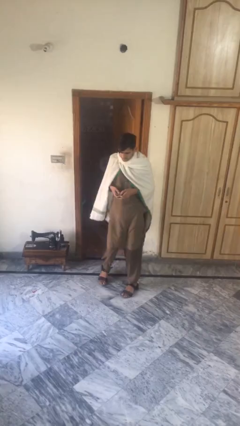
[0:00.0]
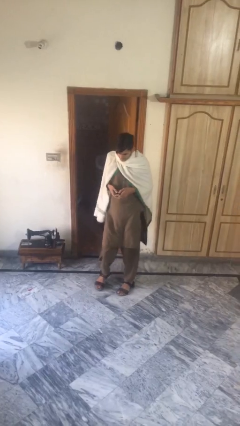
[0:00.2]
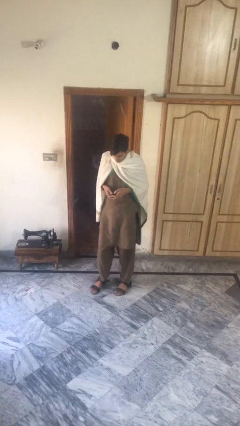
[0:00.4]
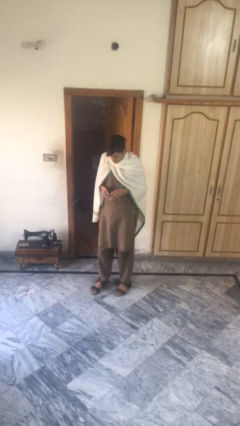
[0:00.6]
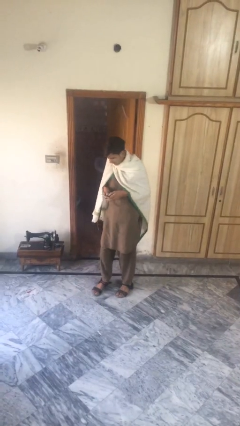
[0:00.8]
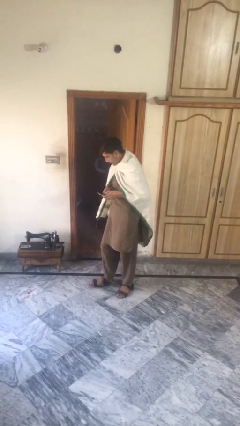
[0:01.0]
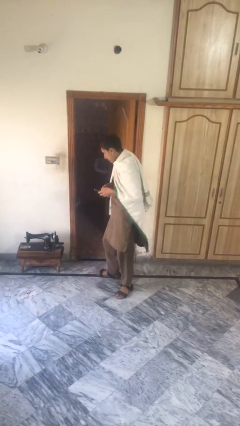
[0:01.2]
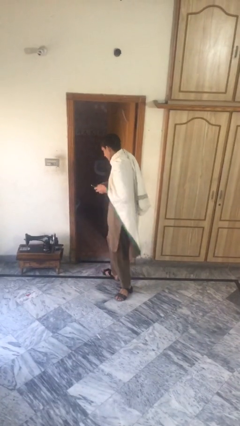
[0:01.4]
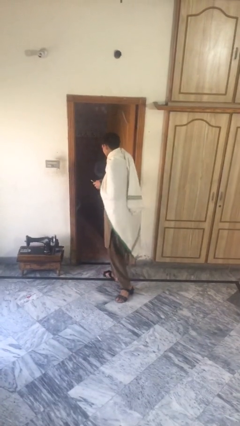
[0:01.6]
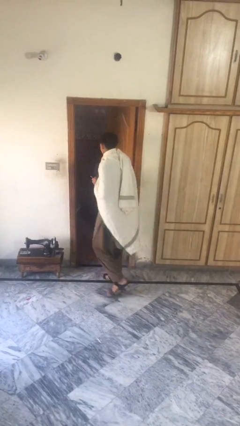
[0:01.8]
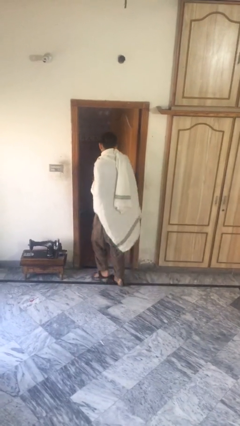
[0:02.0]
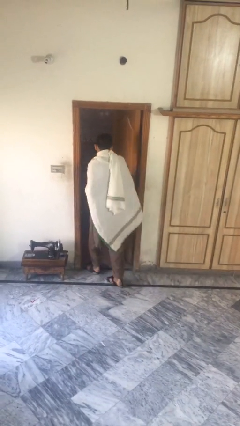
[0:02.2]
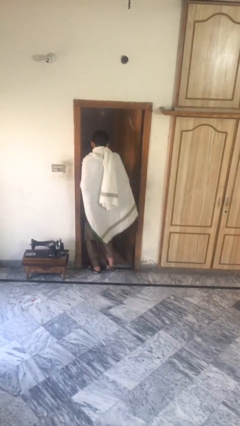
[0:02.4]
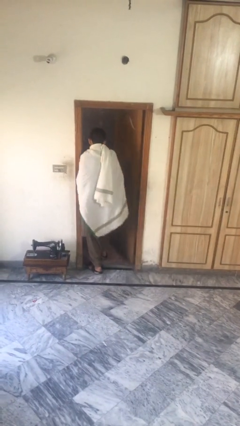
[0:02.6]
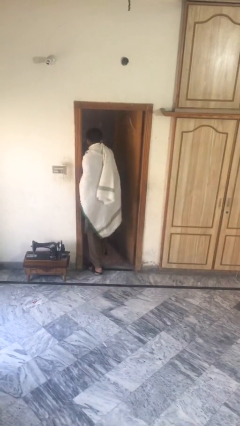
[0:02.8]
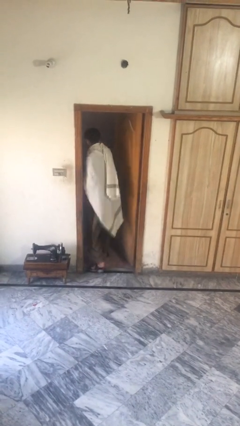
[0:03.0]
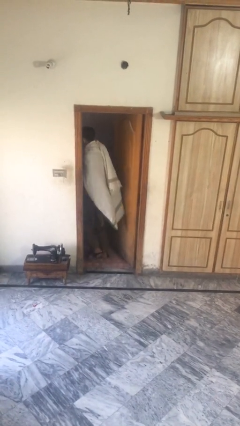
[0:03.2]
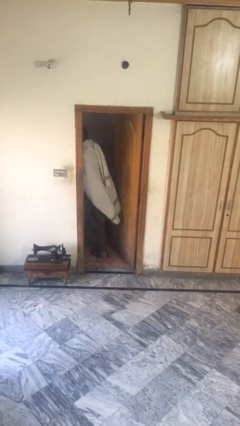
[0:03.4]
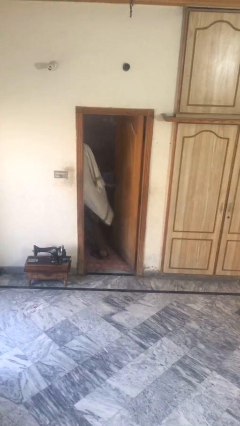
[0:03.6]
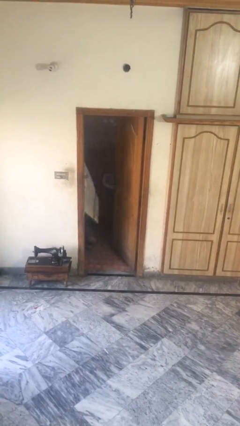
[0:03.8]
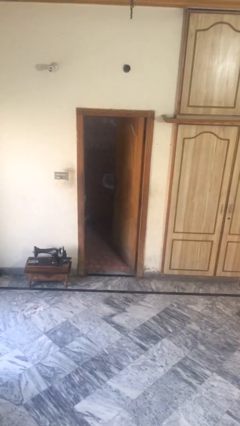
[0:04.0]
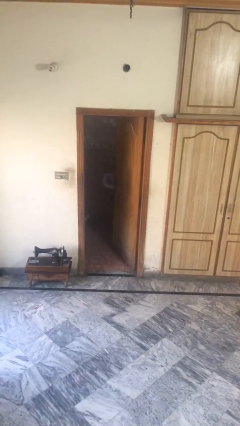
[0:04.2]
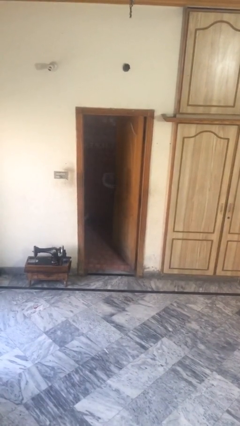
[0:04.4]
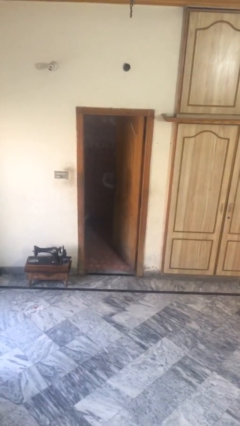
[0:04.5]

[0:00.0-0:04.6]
person exits scene through structure

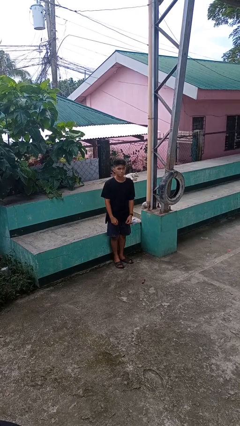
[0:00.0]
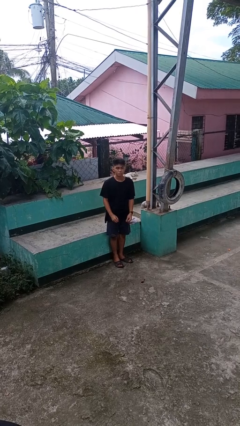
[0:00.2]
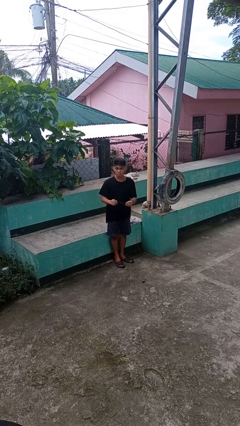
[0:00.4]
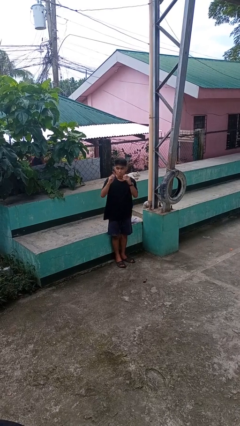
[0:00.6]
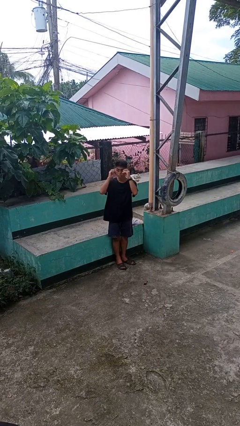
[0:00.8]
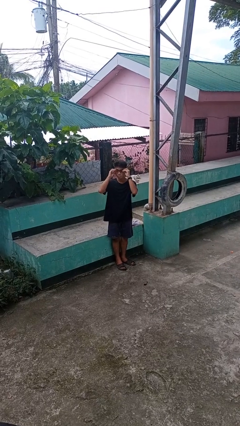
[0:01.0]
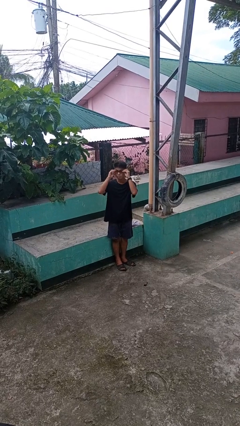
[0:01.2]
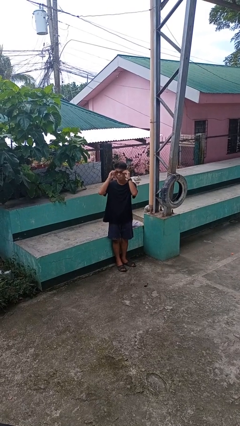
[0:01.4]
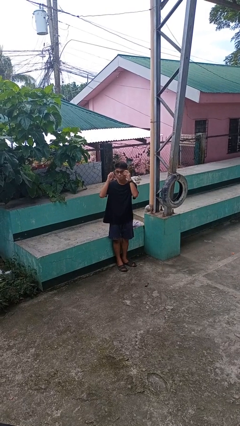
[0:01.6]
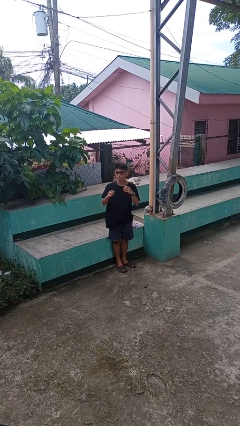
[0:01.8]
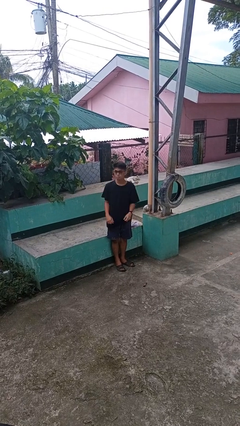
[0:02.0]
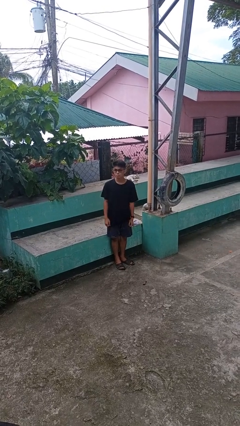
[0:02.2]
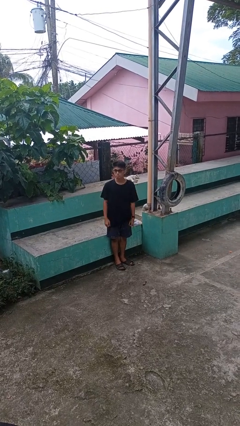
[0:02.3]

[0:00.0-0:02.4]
person puts on glasses

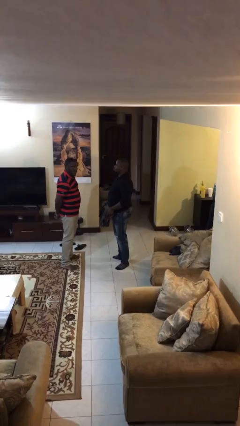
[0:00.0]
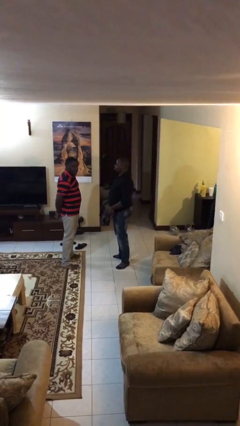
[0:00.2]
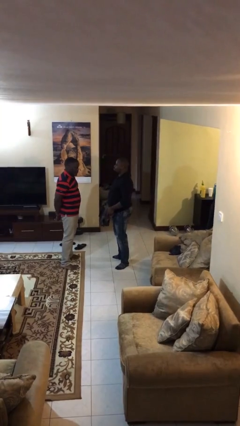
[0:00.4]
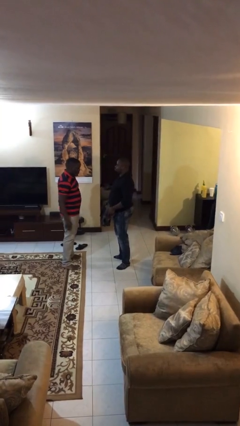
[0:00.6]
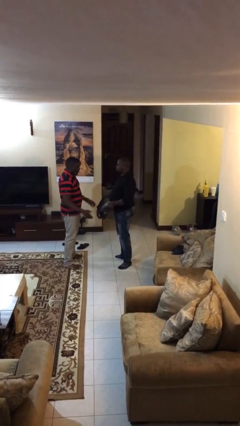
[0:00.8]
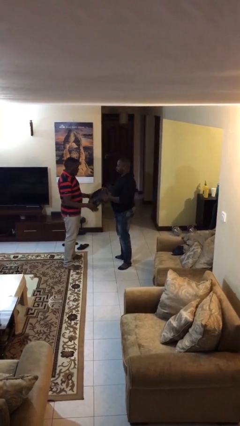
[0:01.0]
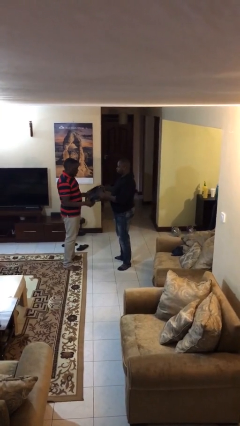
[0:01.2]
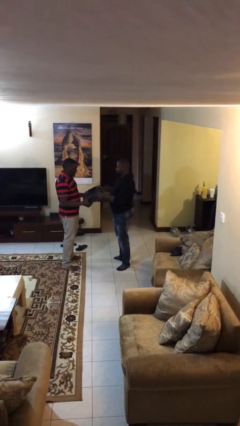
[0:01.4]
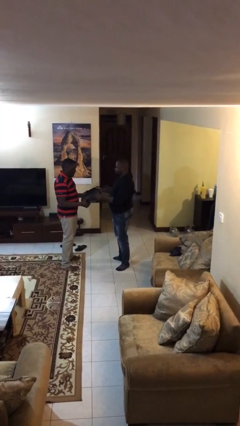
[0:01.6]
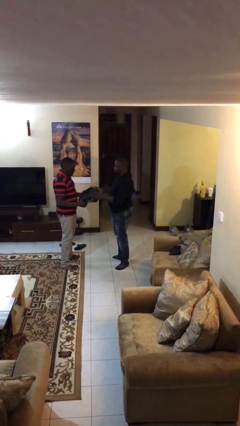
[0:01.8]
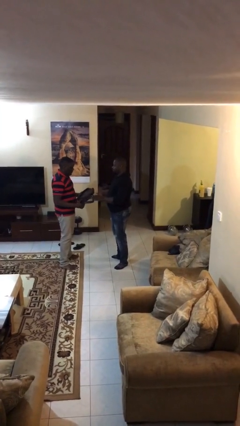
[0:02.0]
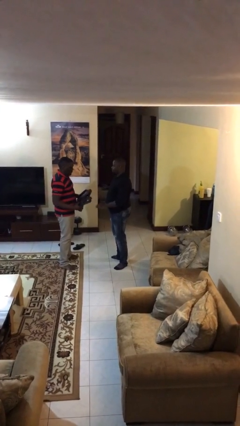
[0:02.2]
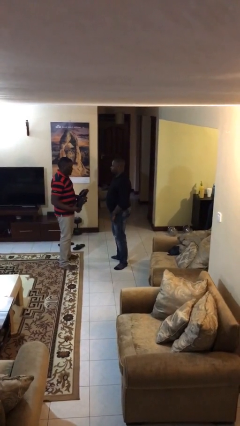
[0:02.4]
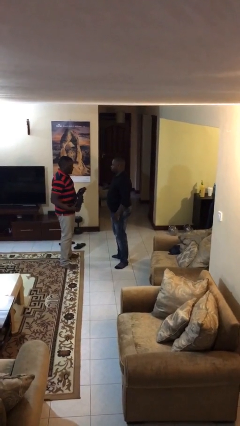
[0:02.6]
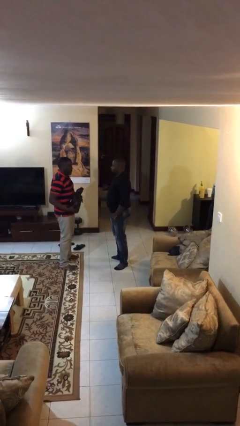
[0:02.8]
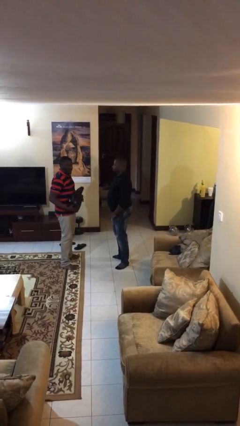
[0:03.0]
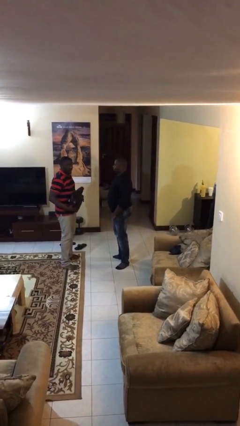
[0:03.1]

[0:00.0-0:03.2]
person transfers object to person

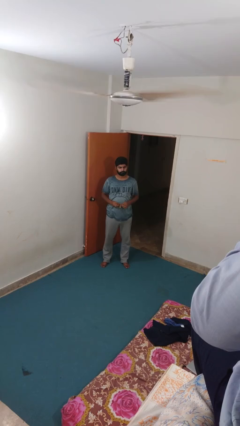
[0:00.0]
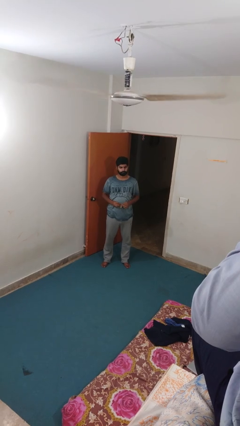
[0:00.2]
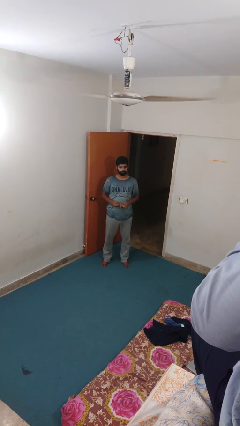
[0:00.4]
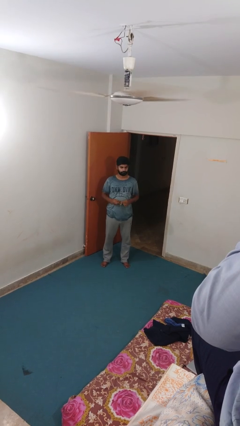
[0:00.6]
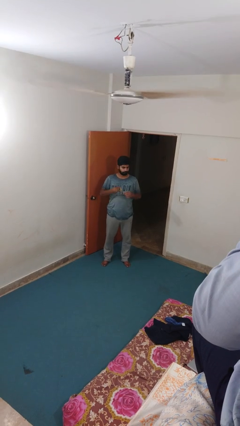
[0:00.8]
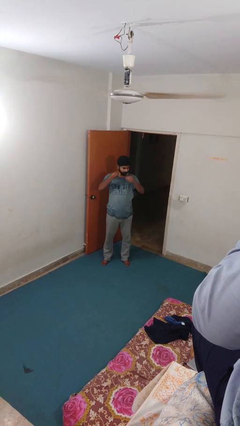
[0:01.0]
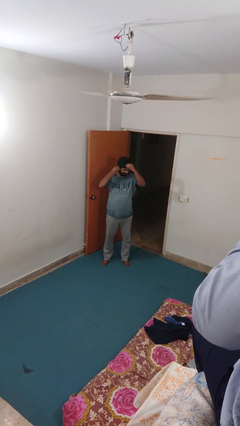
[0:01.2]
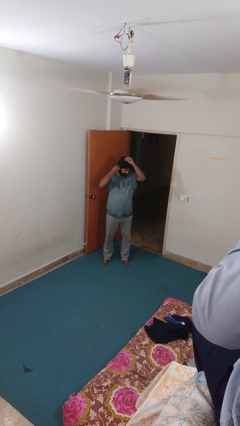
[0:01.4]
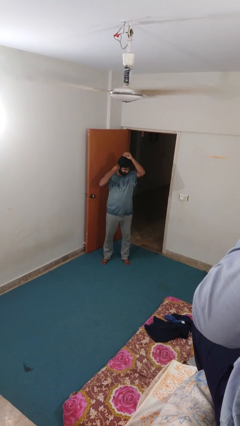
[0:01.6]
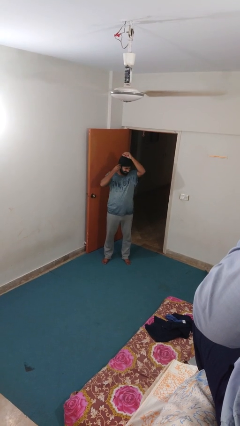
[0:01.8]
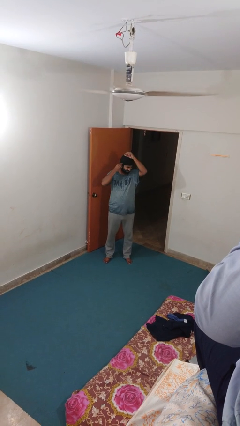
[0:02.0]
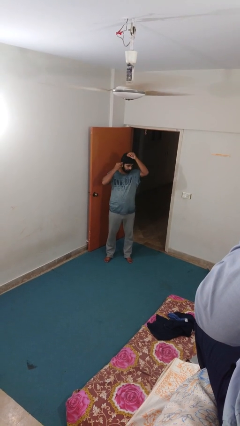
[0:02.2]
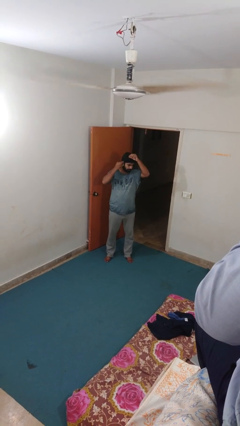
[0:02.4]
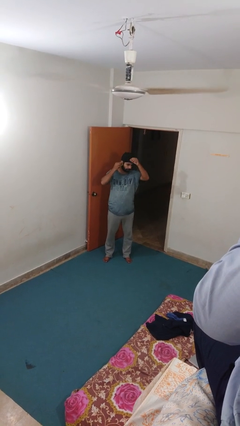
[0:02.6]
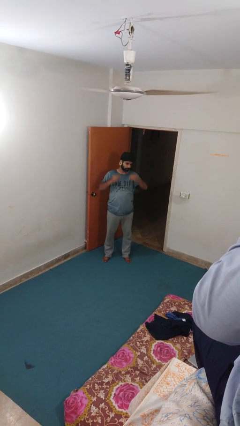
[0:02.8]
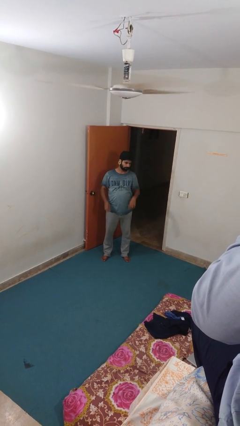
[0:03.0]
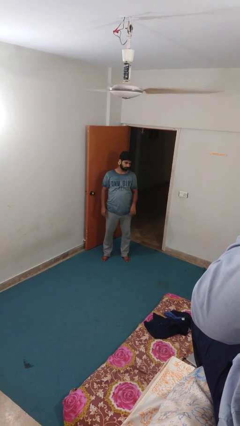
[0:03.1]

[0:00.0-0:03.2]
person puts on earrings

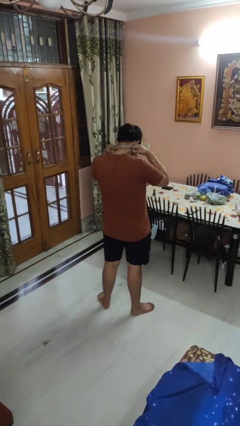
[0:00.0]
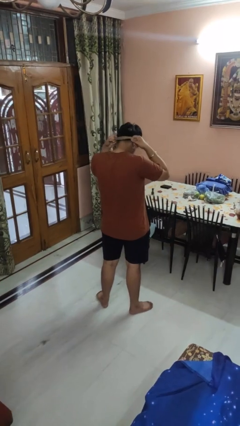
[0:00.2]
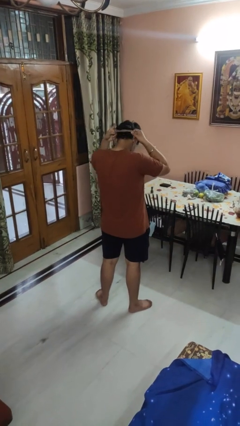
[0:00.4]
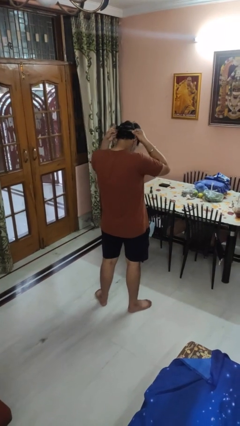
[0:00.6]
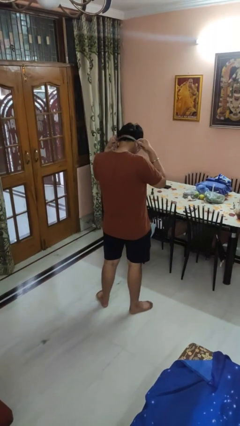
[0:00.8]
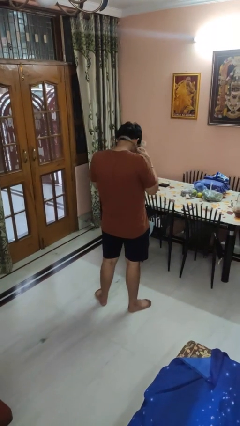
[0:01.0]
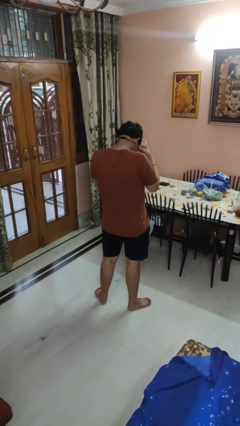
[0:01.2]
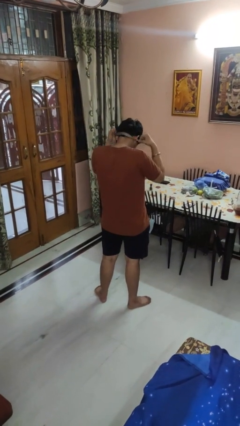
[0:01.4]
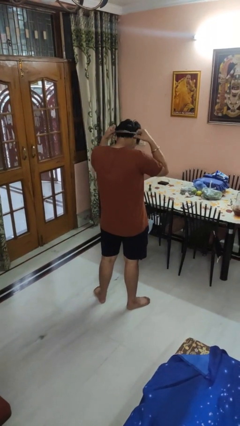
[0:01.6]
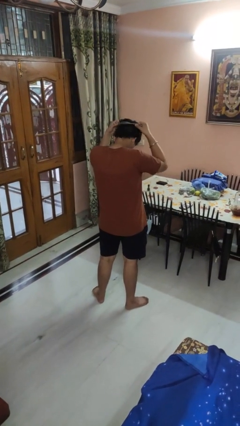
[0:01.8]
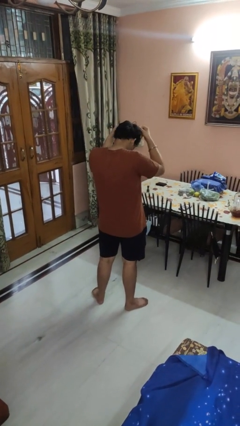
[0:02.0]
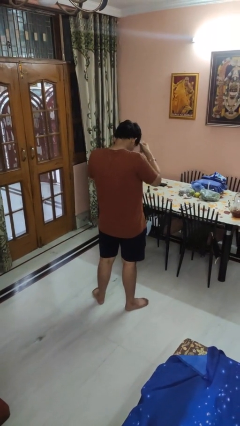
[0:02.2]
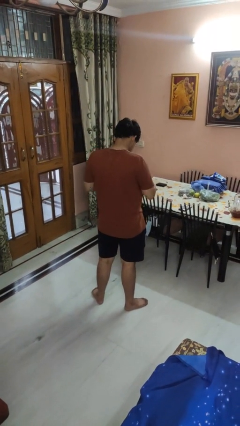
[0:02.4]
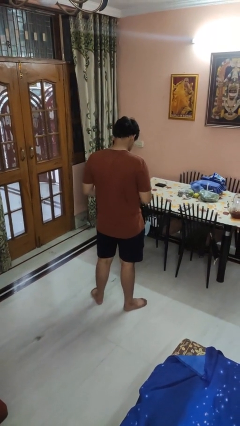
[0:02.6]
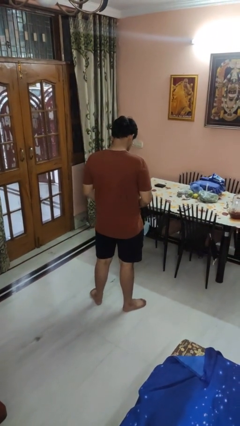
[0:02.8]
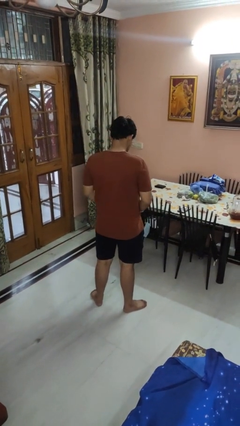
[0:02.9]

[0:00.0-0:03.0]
person takes off necktie

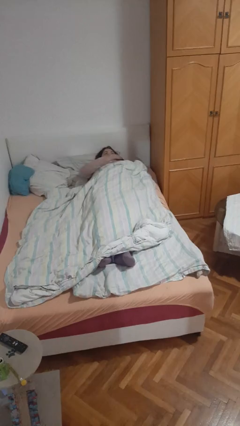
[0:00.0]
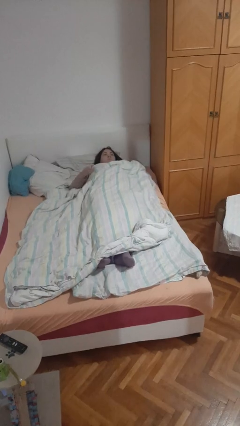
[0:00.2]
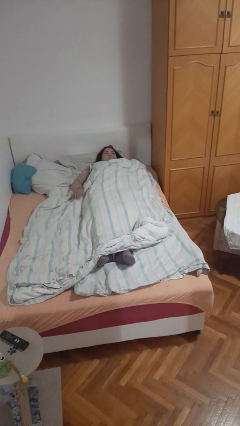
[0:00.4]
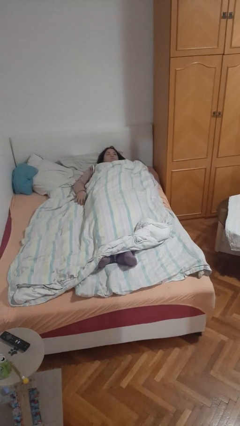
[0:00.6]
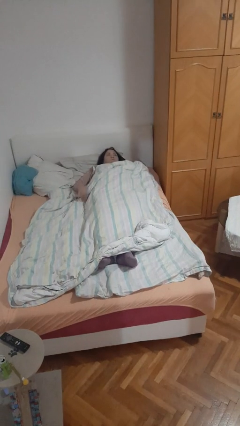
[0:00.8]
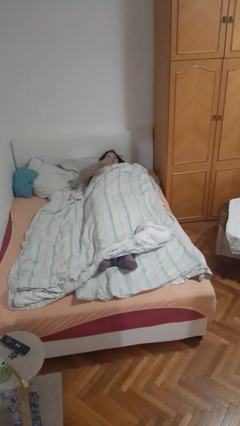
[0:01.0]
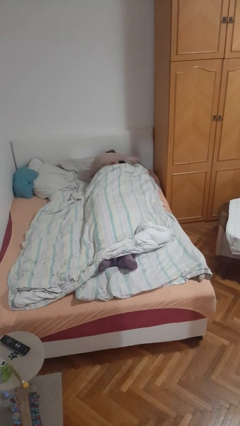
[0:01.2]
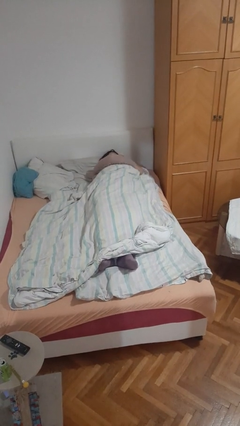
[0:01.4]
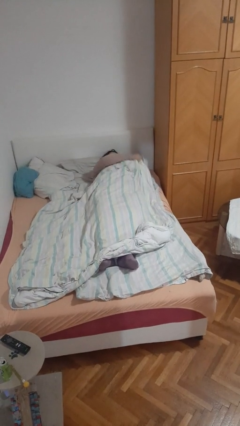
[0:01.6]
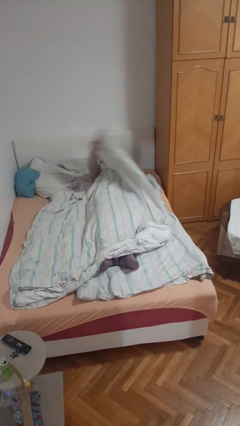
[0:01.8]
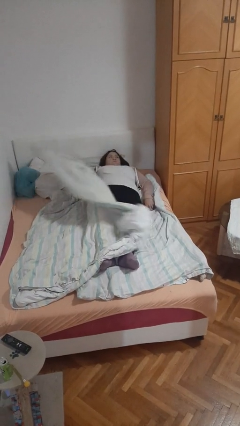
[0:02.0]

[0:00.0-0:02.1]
person uncovers with bedsheets
